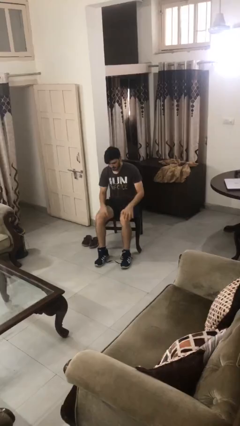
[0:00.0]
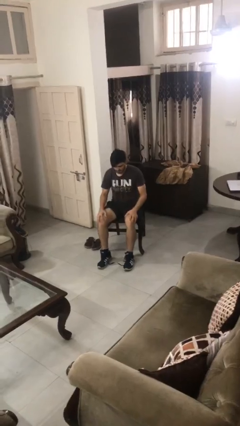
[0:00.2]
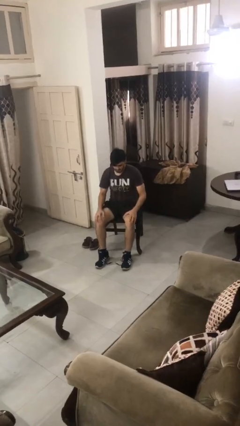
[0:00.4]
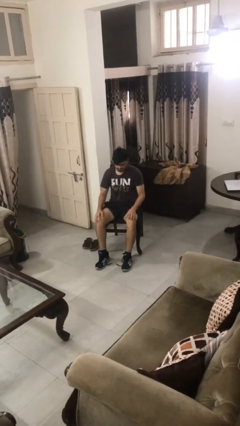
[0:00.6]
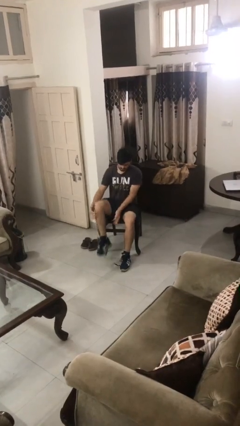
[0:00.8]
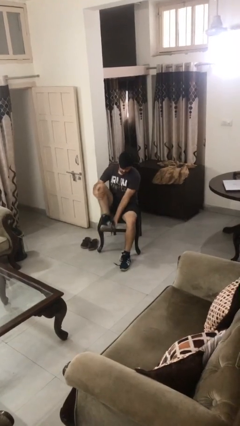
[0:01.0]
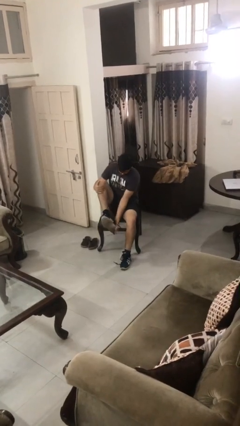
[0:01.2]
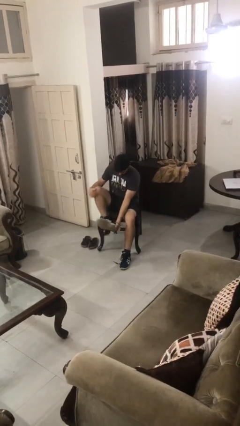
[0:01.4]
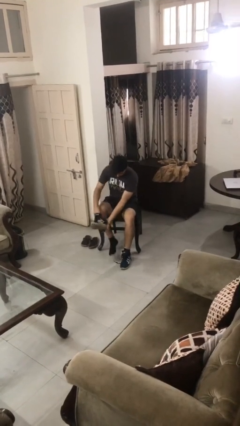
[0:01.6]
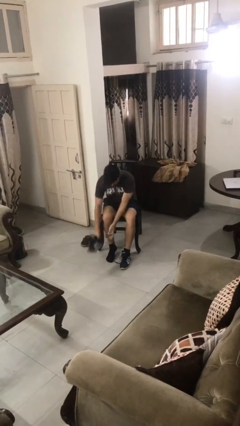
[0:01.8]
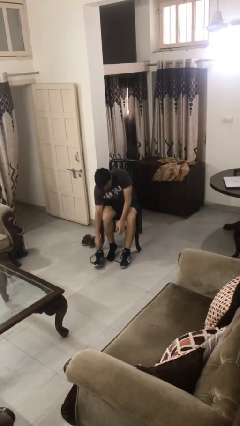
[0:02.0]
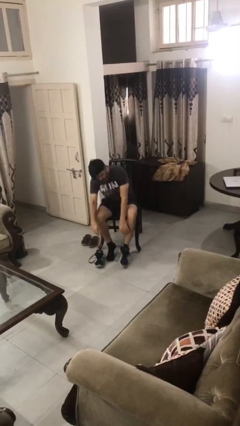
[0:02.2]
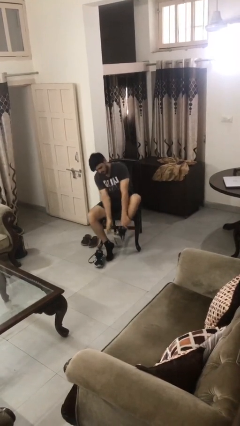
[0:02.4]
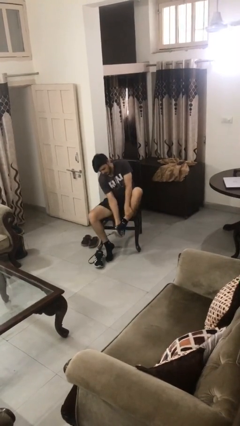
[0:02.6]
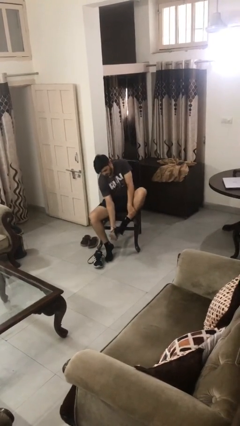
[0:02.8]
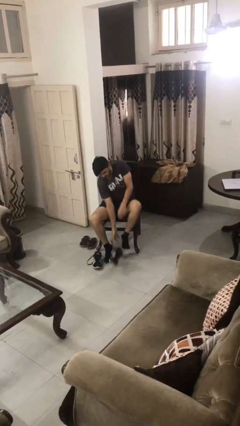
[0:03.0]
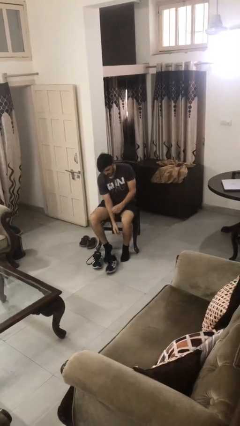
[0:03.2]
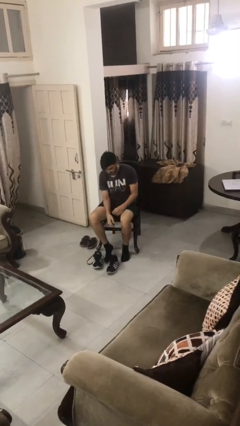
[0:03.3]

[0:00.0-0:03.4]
person takes off shoes

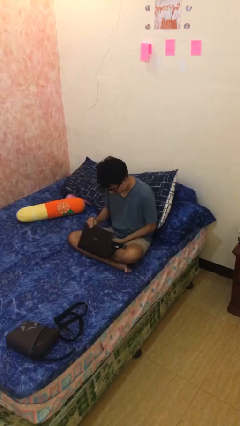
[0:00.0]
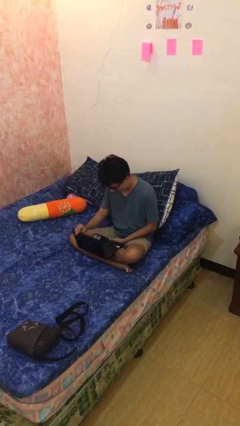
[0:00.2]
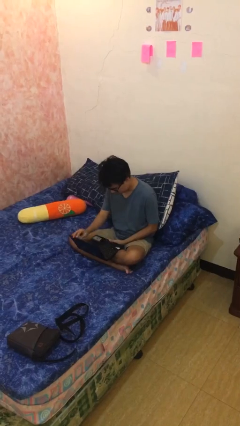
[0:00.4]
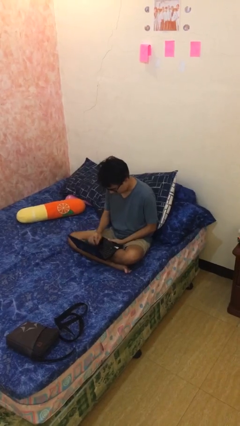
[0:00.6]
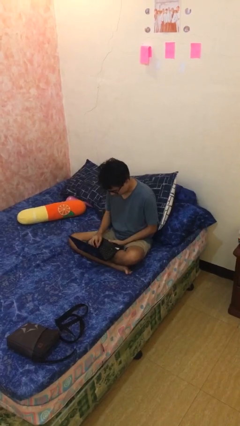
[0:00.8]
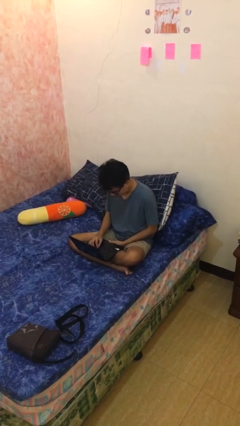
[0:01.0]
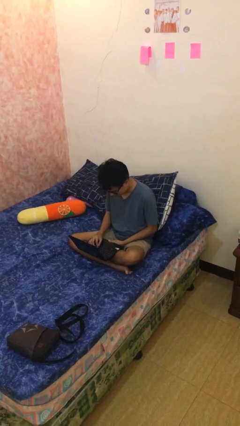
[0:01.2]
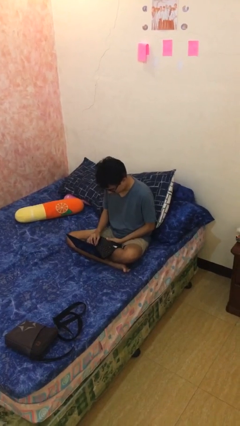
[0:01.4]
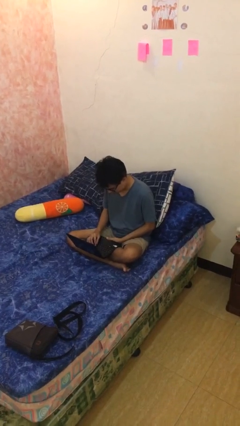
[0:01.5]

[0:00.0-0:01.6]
person interacts with laptop

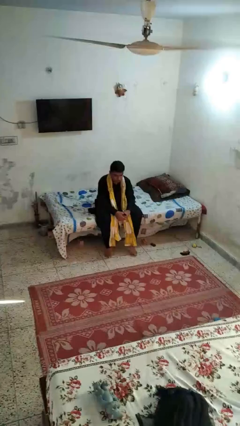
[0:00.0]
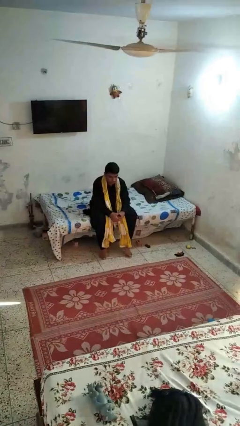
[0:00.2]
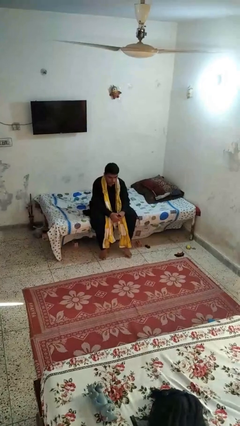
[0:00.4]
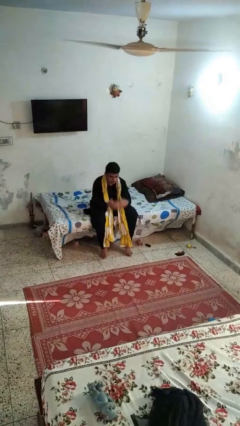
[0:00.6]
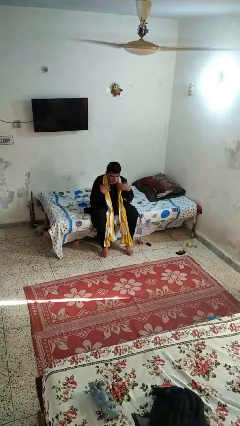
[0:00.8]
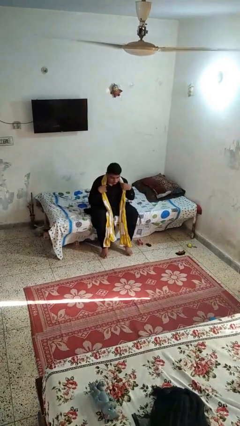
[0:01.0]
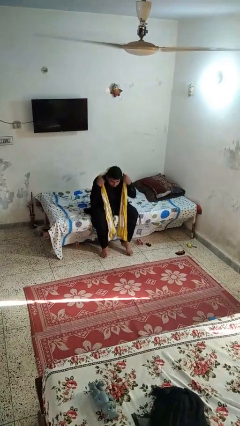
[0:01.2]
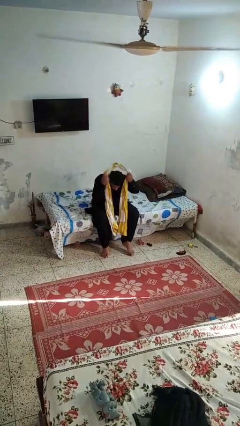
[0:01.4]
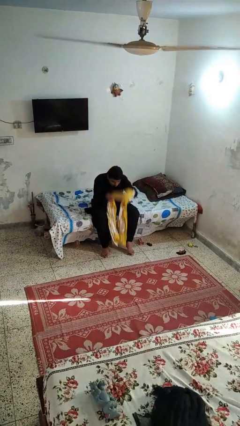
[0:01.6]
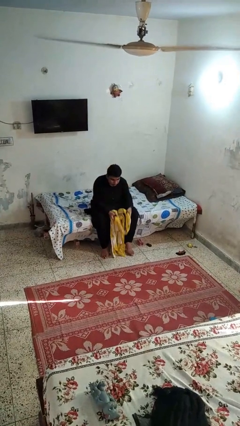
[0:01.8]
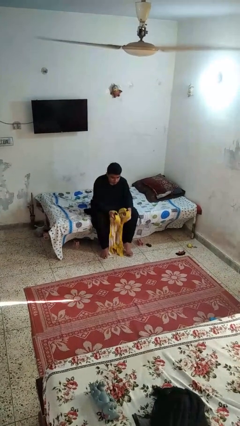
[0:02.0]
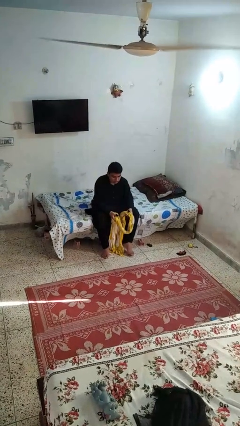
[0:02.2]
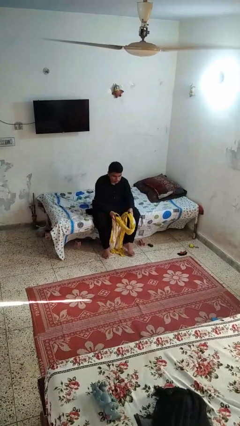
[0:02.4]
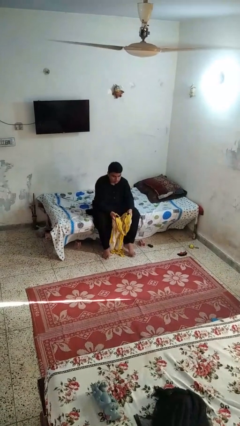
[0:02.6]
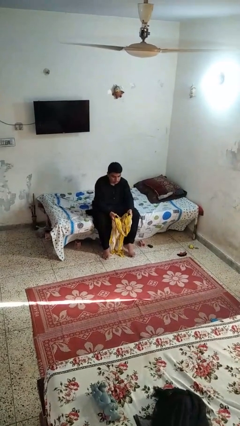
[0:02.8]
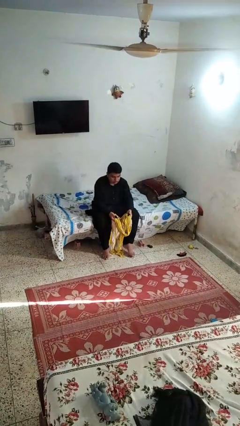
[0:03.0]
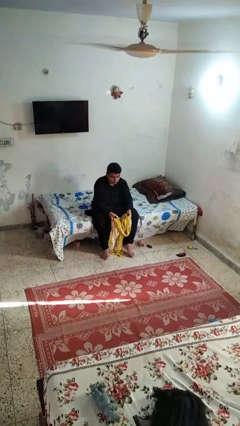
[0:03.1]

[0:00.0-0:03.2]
person takes off scarf

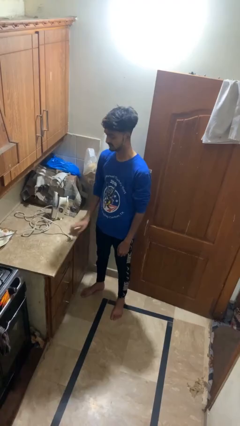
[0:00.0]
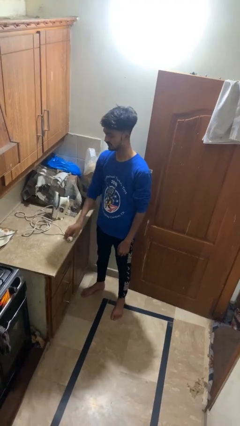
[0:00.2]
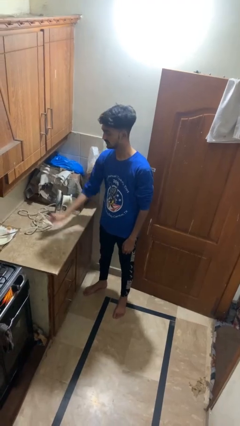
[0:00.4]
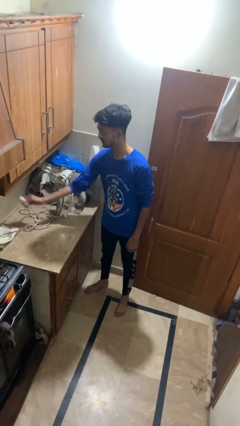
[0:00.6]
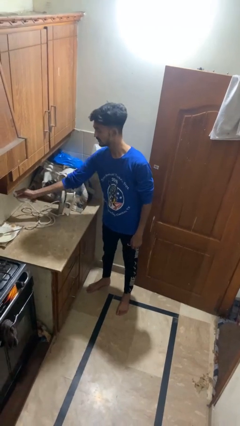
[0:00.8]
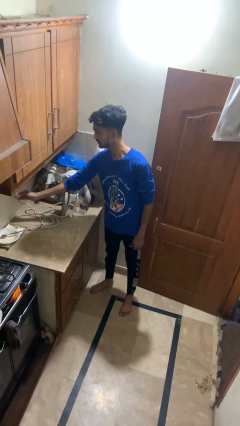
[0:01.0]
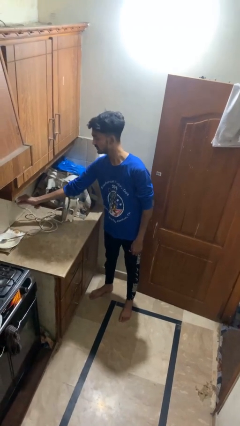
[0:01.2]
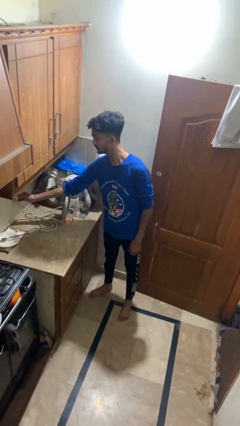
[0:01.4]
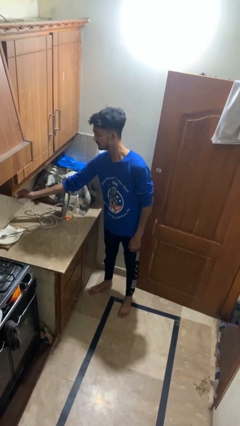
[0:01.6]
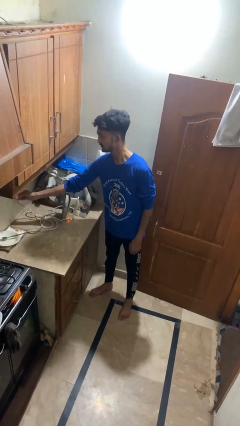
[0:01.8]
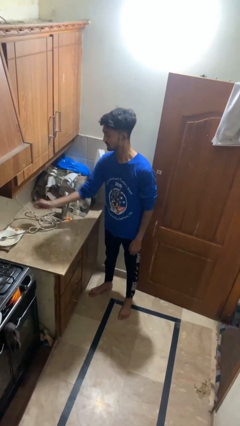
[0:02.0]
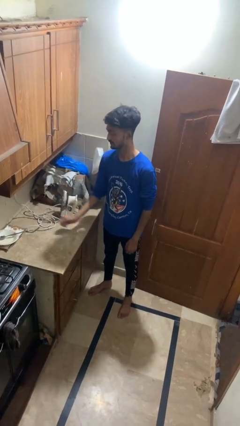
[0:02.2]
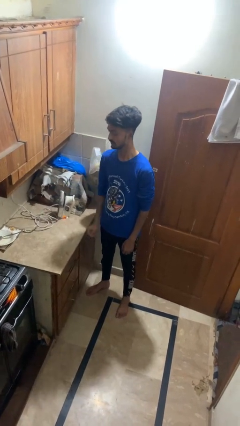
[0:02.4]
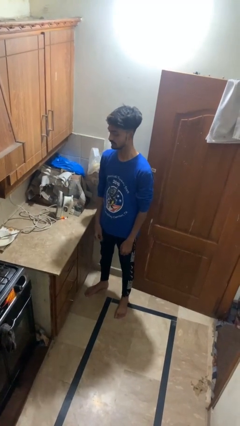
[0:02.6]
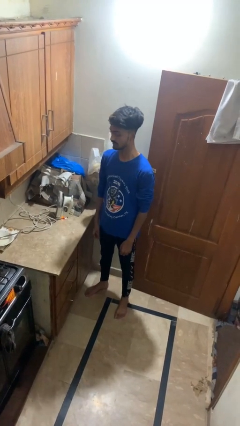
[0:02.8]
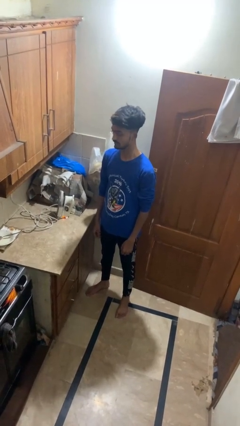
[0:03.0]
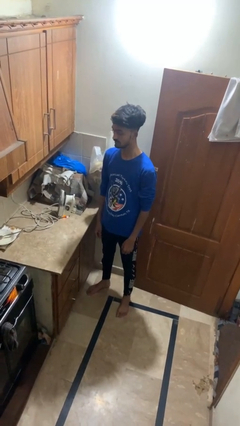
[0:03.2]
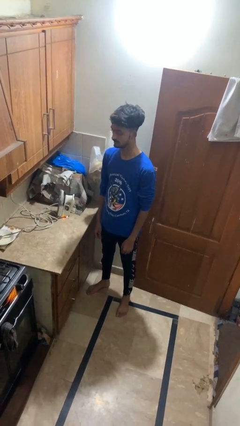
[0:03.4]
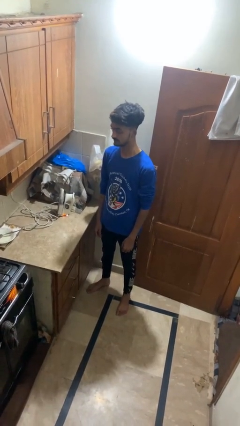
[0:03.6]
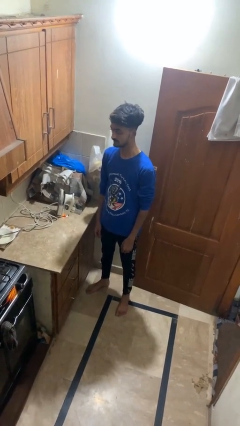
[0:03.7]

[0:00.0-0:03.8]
person plugs into electrical socket

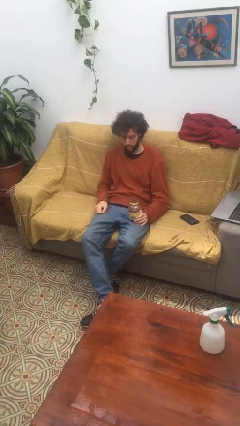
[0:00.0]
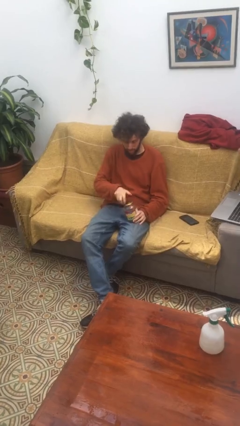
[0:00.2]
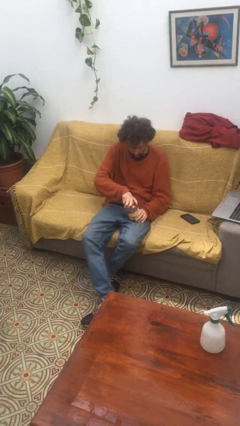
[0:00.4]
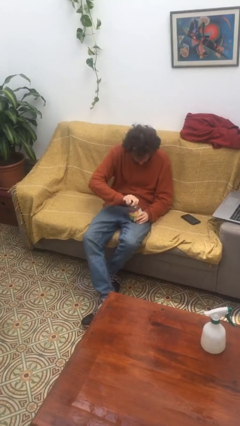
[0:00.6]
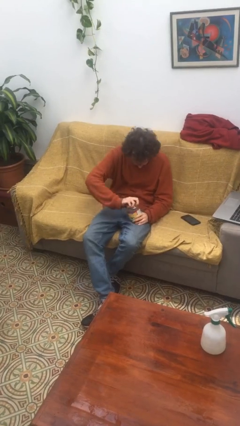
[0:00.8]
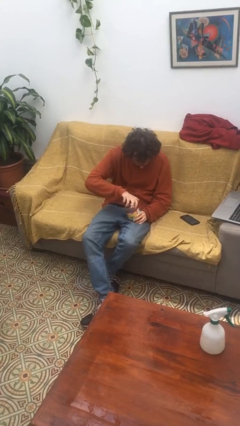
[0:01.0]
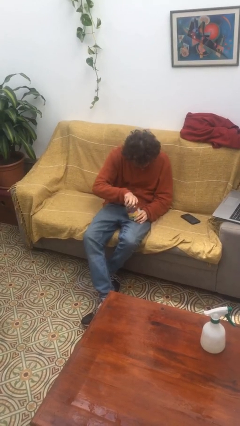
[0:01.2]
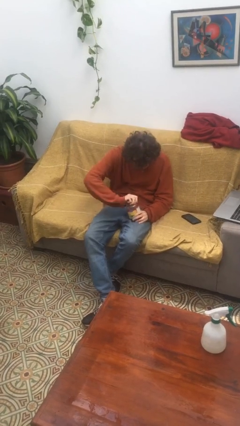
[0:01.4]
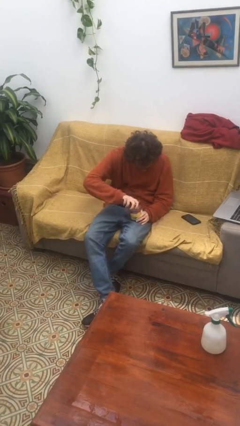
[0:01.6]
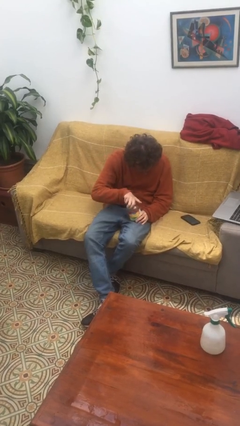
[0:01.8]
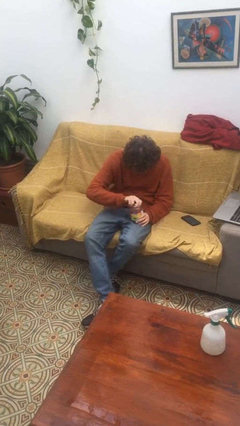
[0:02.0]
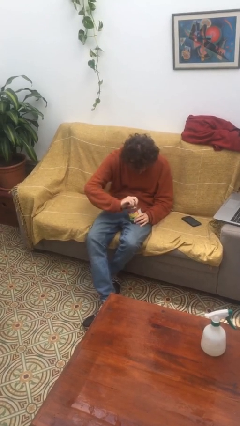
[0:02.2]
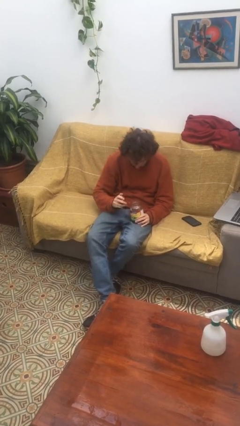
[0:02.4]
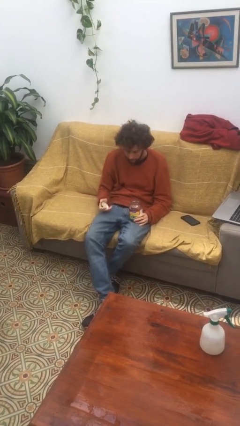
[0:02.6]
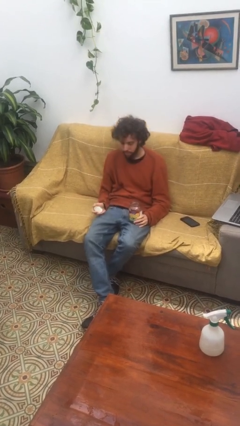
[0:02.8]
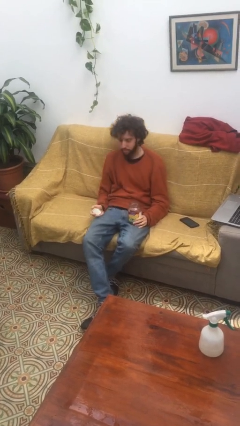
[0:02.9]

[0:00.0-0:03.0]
person opens jar

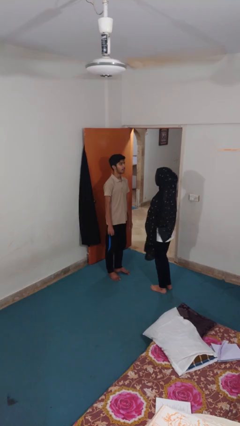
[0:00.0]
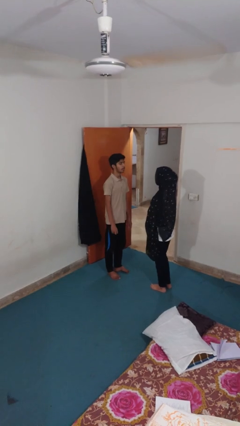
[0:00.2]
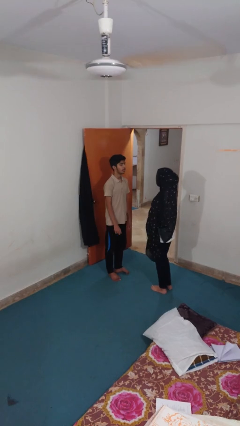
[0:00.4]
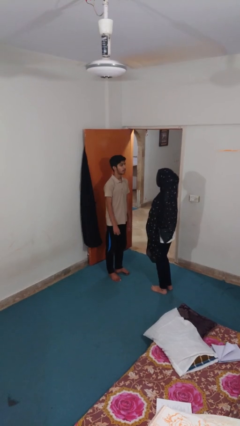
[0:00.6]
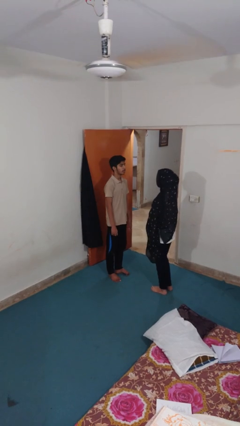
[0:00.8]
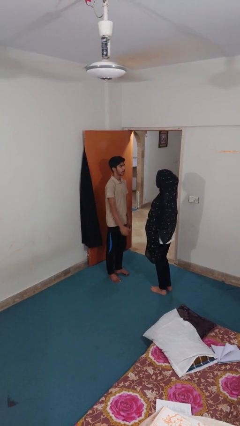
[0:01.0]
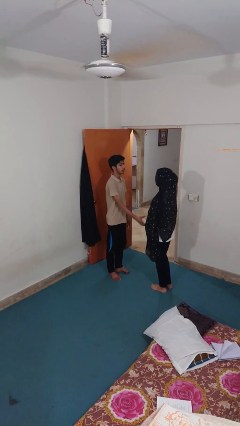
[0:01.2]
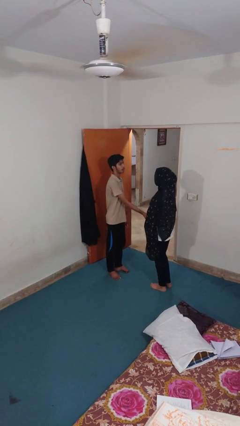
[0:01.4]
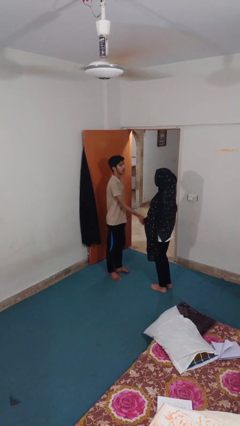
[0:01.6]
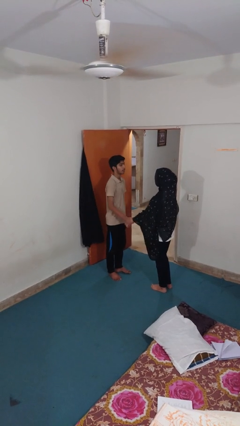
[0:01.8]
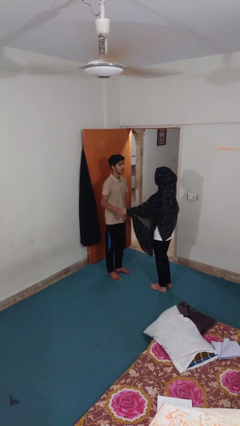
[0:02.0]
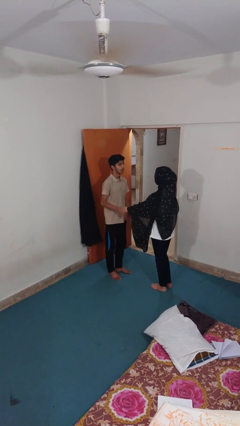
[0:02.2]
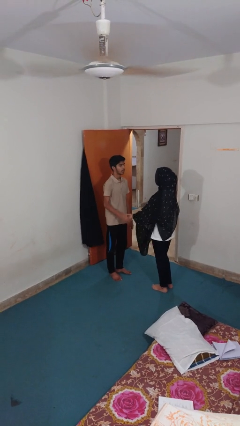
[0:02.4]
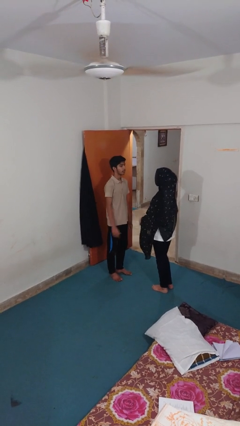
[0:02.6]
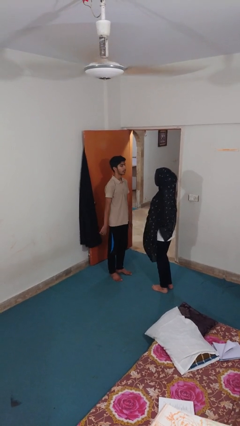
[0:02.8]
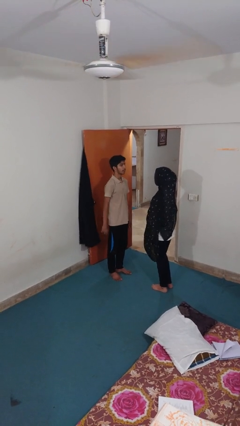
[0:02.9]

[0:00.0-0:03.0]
person grabs person by forearm
